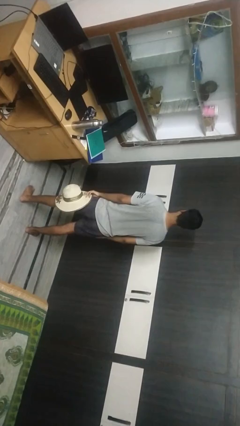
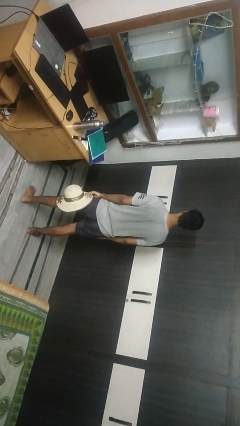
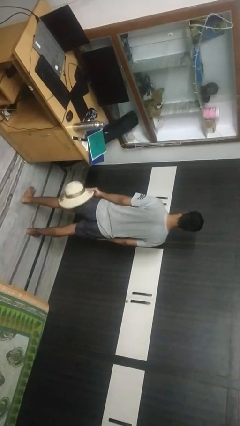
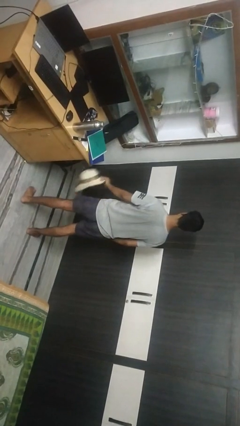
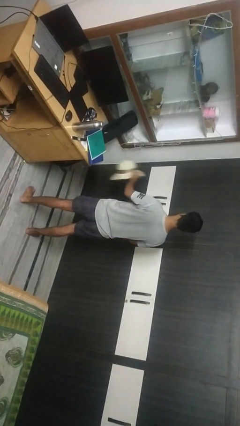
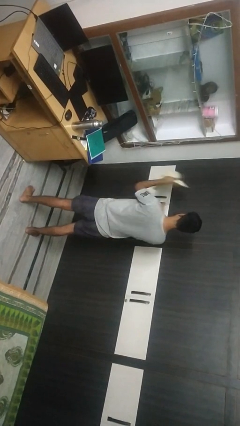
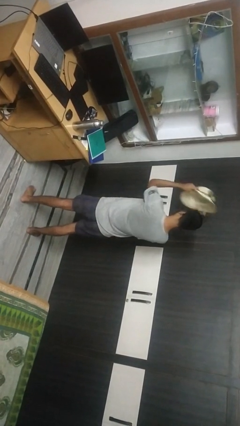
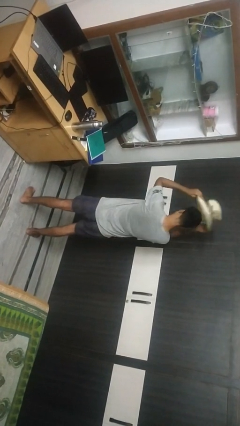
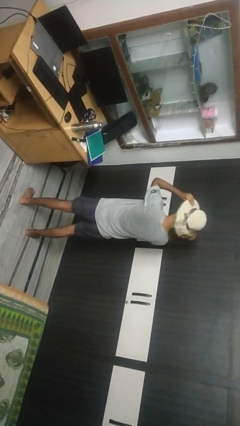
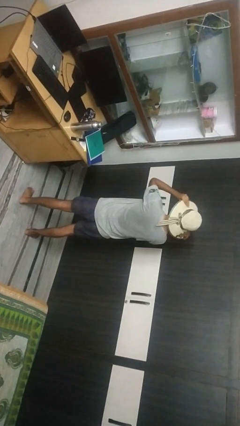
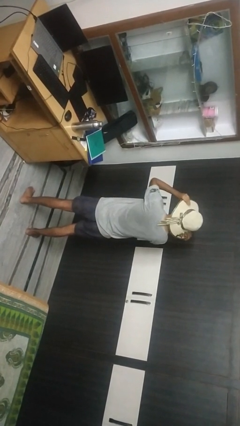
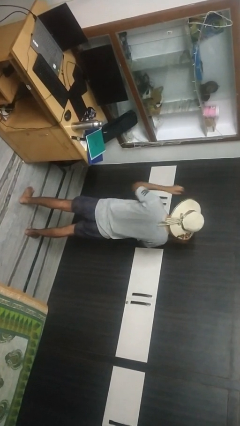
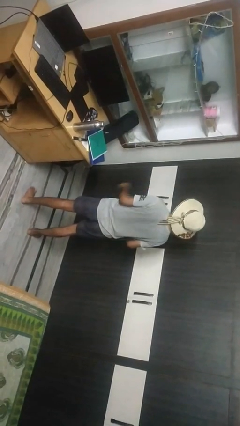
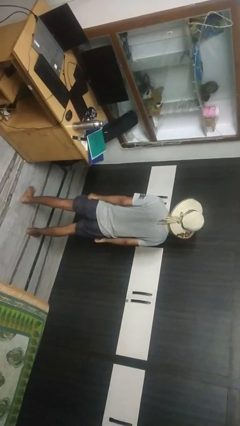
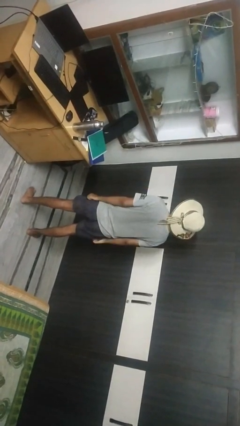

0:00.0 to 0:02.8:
person puts on hat

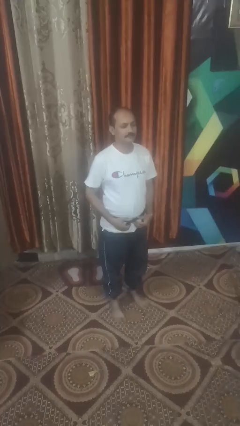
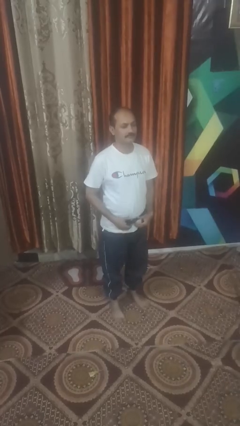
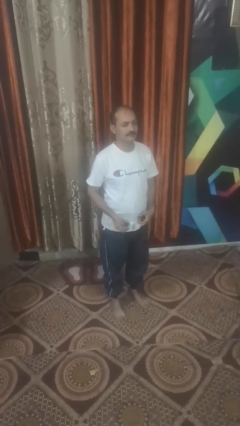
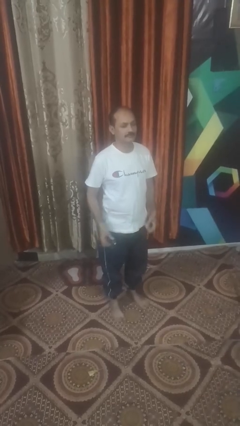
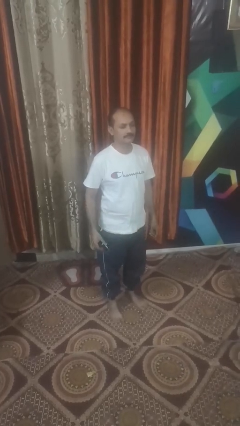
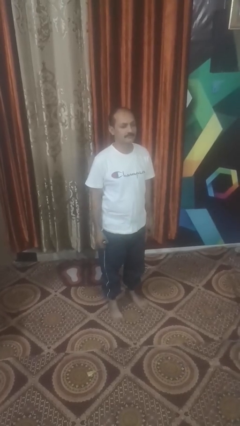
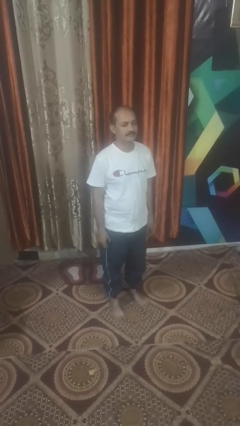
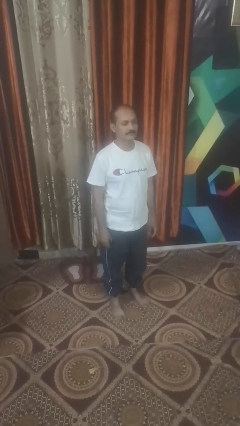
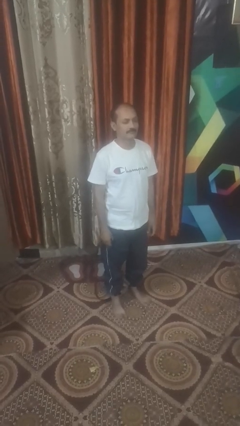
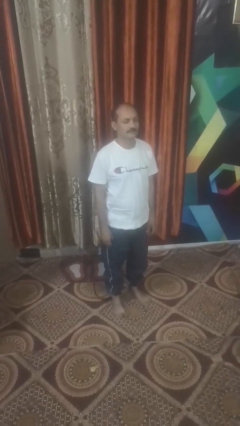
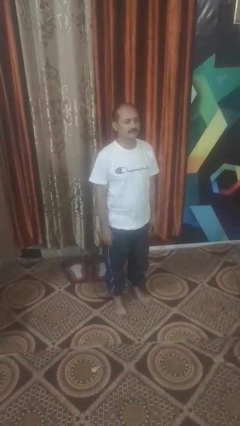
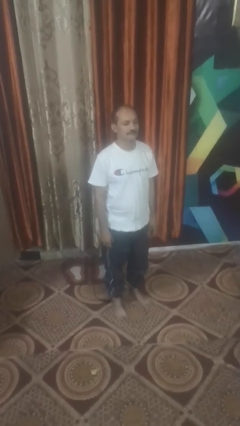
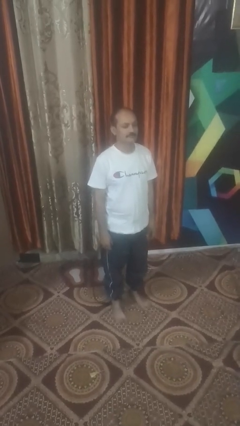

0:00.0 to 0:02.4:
person takes off belt

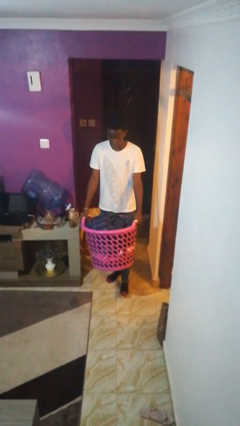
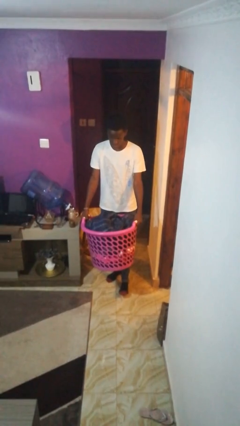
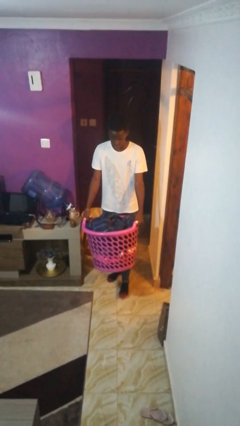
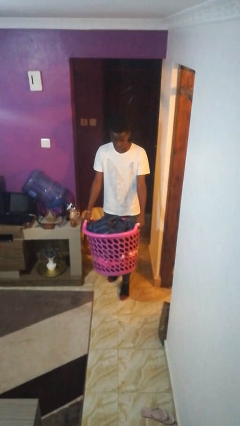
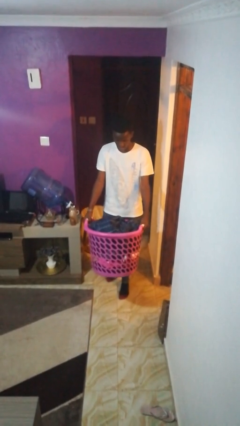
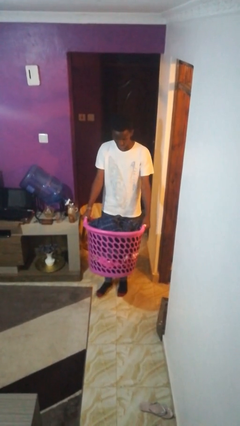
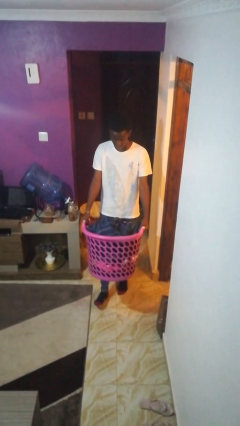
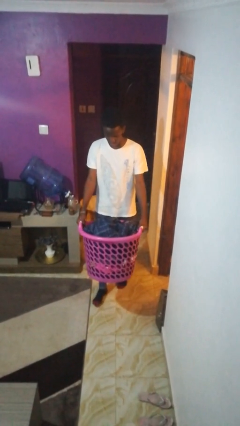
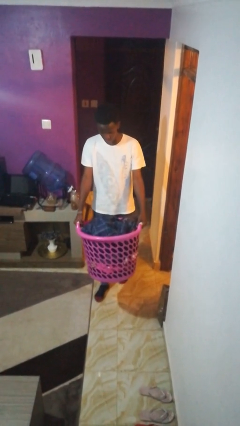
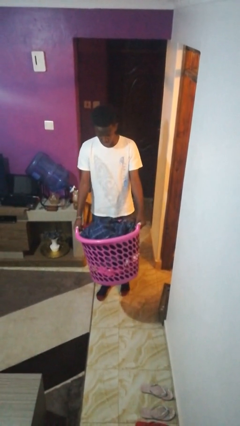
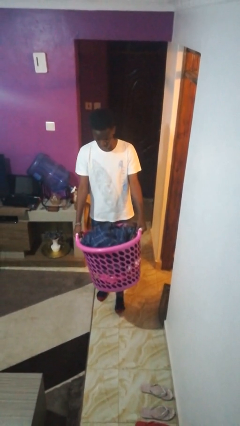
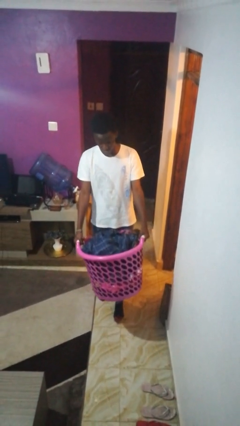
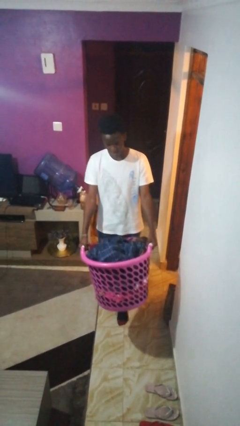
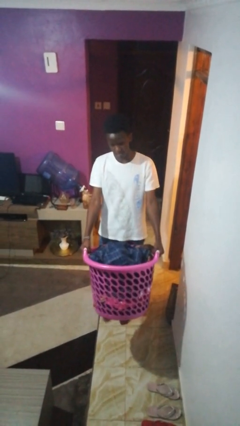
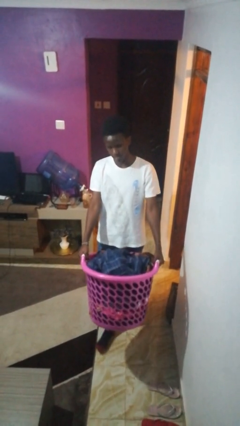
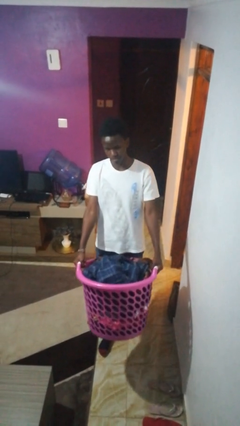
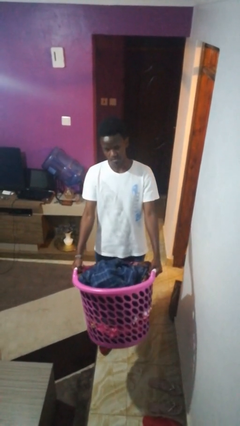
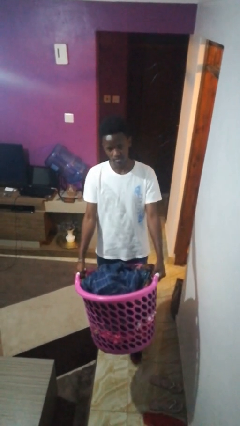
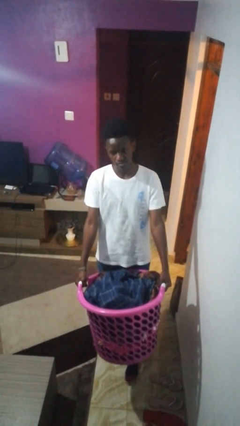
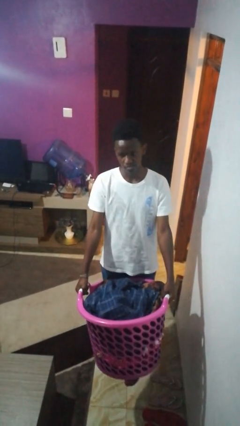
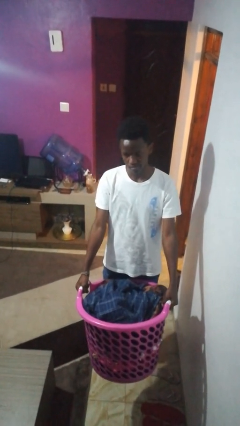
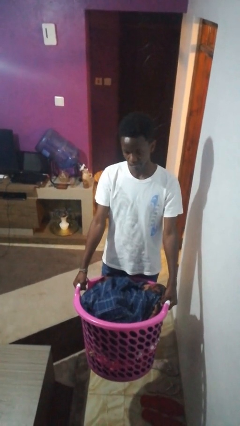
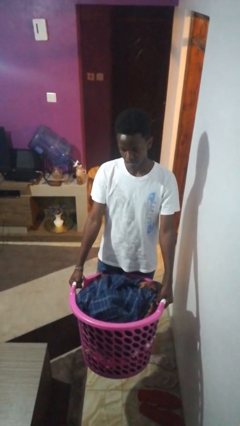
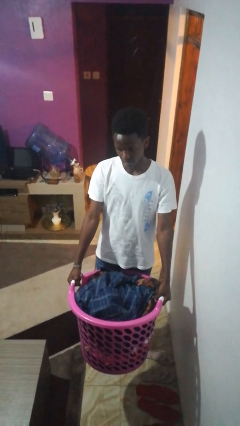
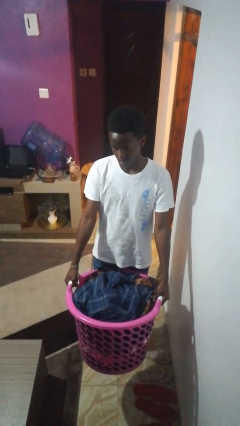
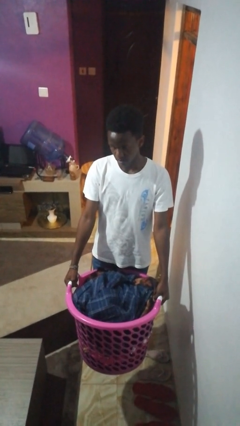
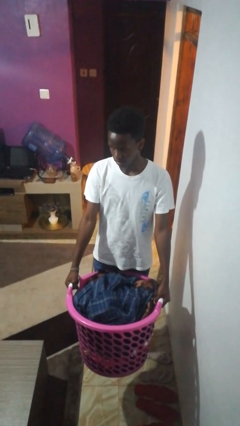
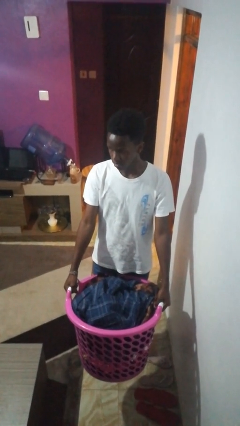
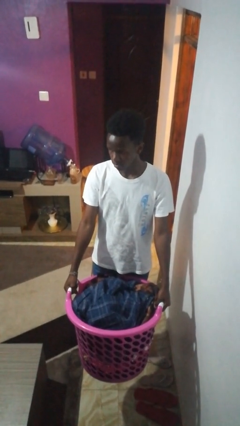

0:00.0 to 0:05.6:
person carries laundry basket

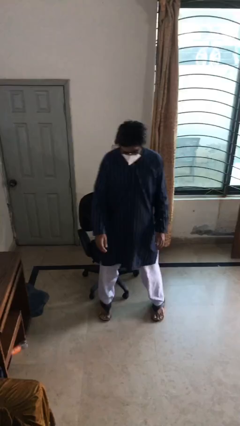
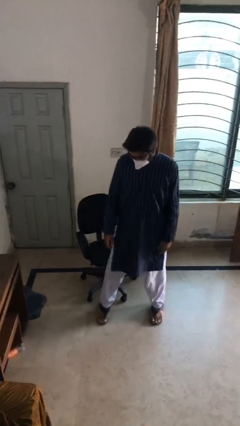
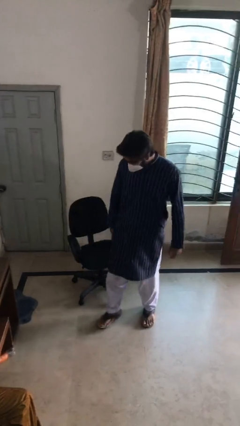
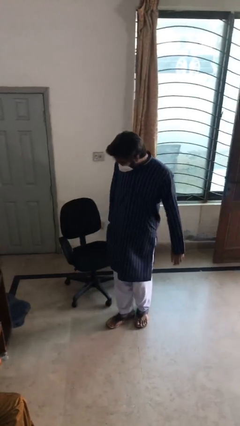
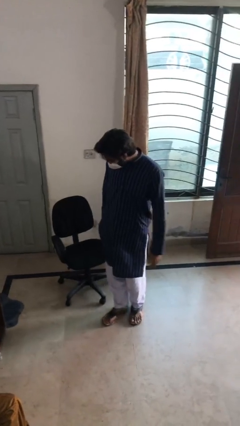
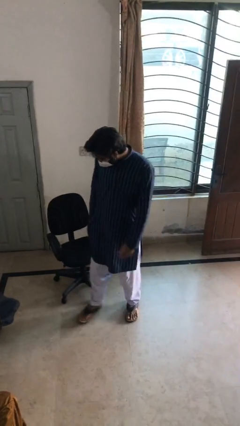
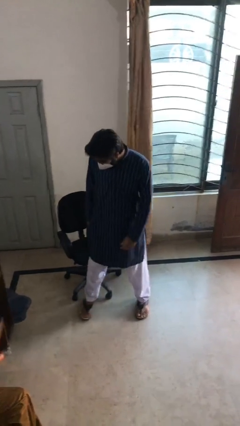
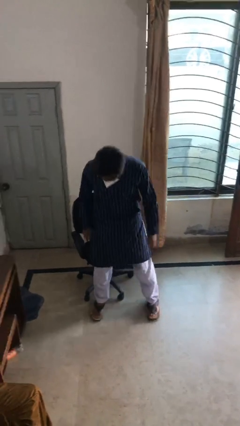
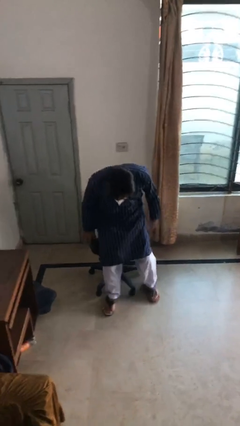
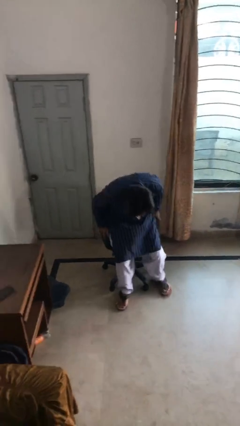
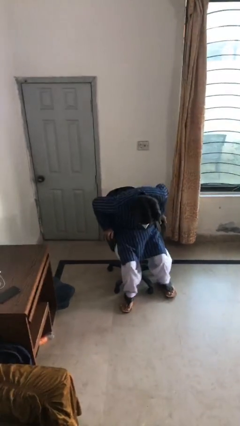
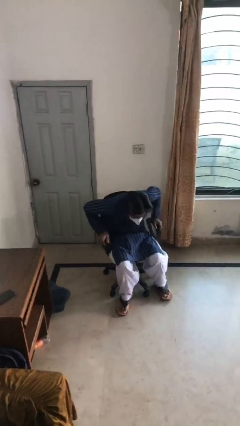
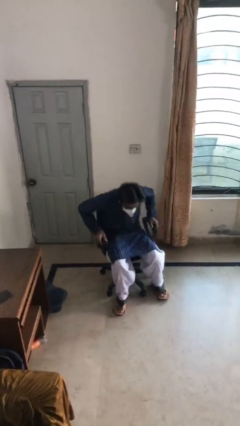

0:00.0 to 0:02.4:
person sits down

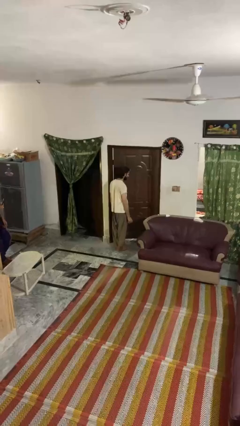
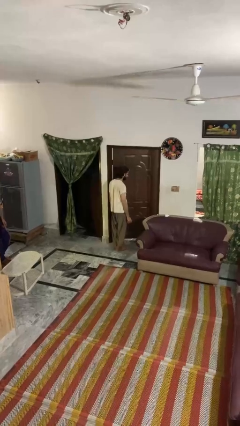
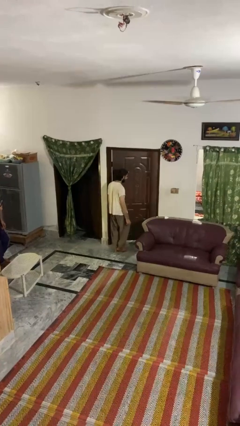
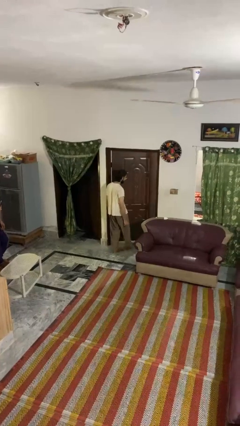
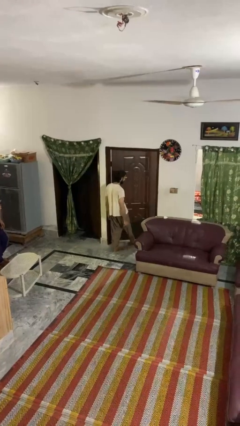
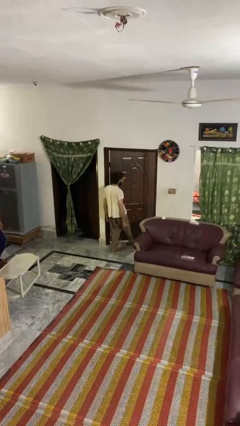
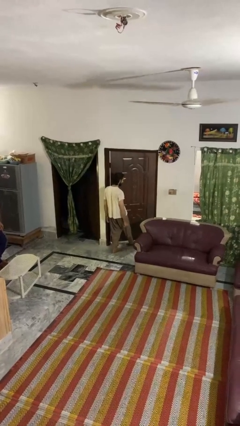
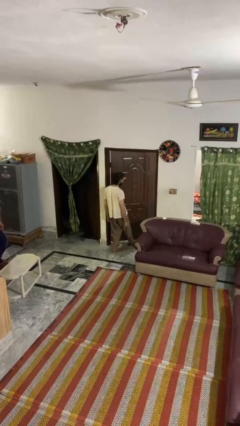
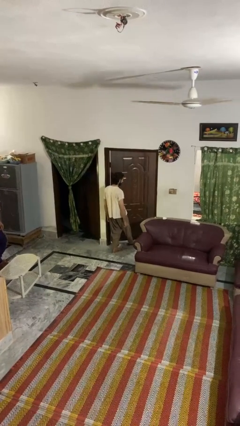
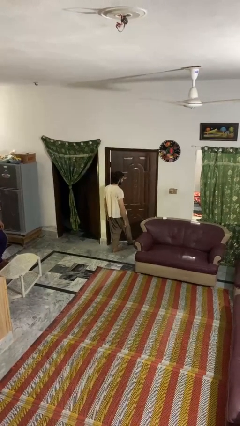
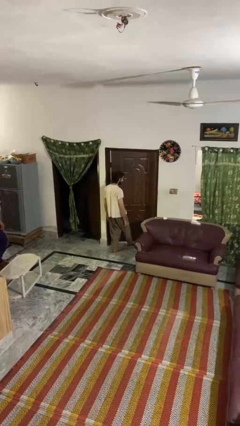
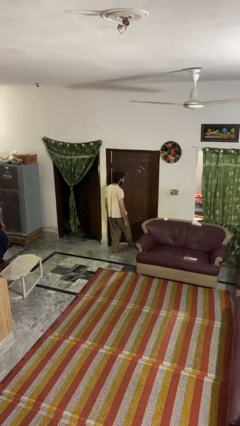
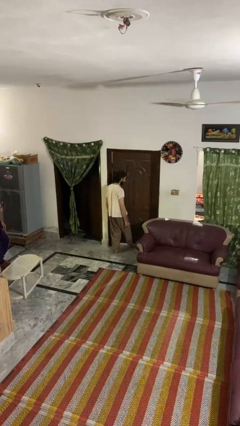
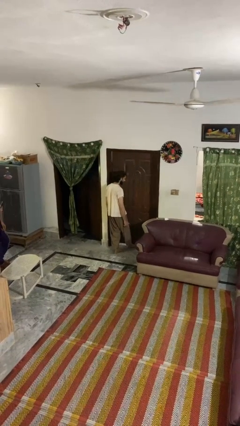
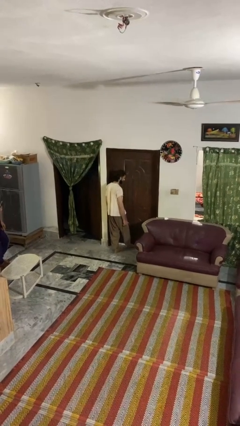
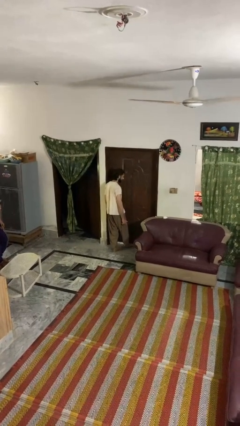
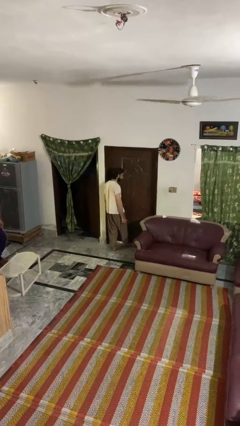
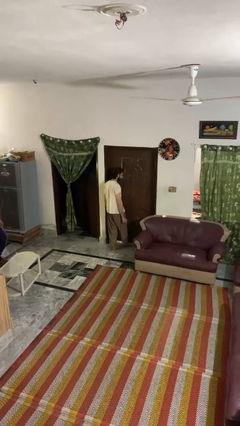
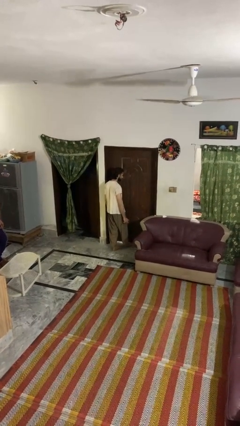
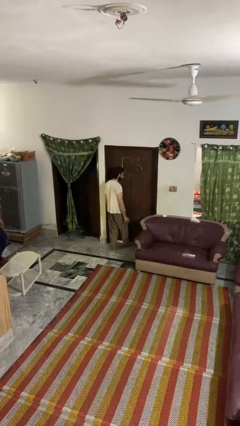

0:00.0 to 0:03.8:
person closes door with foot

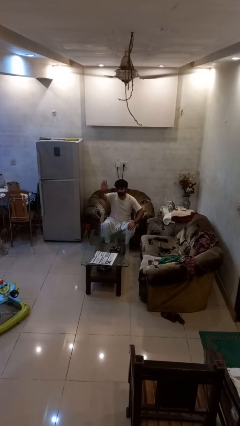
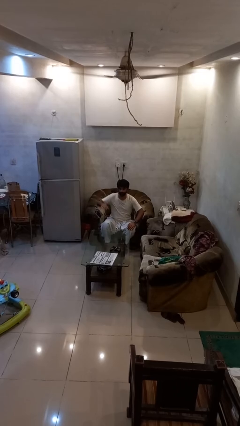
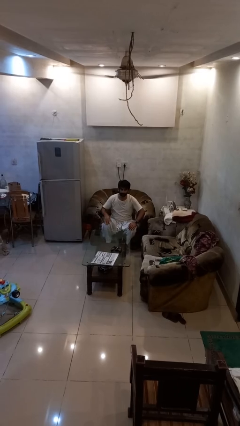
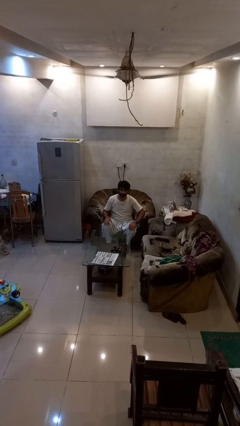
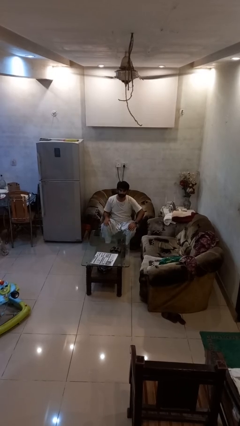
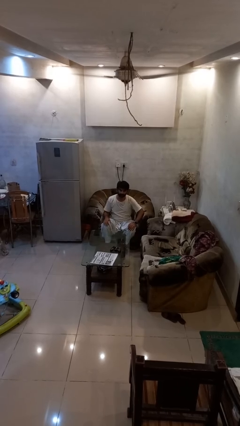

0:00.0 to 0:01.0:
person gestures lower hand
